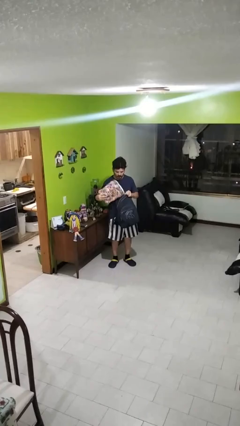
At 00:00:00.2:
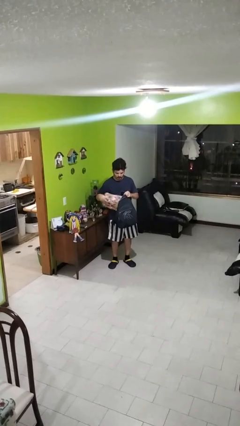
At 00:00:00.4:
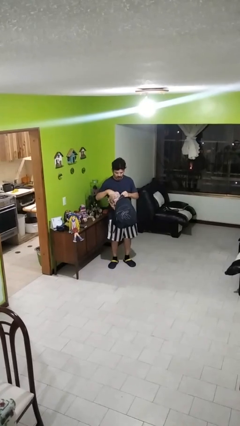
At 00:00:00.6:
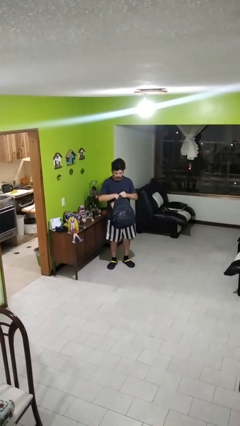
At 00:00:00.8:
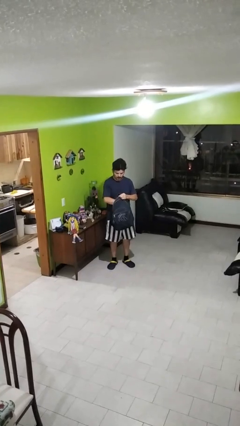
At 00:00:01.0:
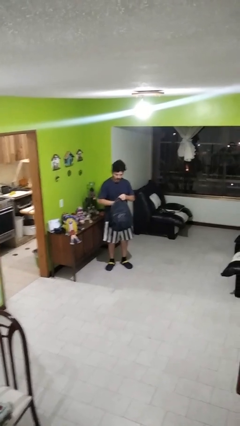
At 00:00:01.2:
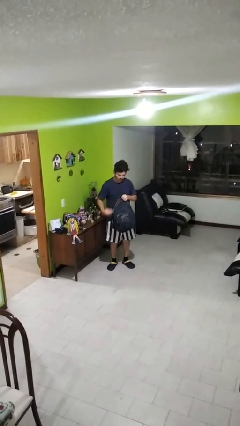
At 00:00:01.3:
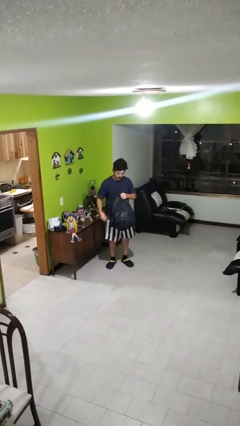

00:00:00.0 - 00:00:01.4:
person puts object into backpack

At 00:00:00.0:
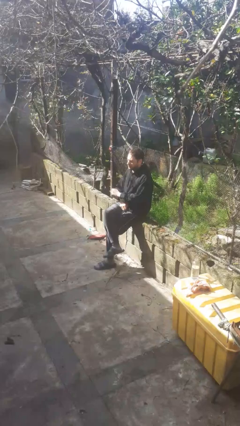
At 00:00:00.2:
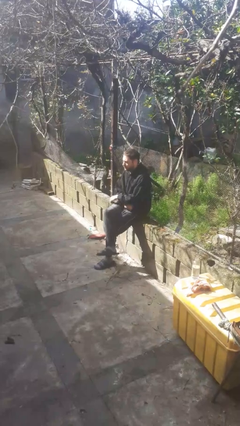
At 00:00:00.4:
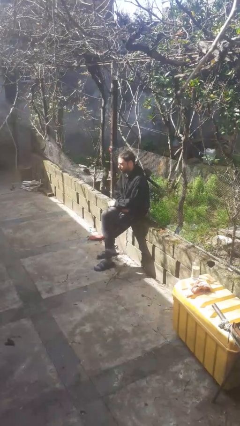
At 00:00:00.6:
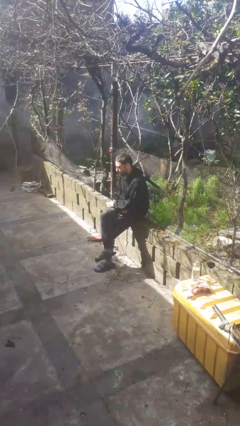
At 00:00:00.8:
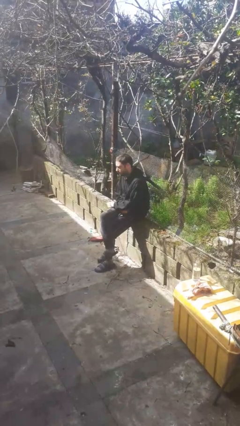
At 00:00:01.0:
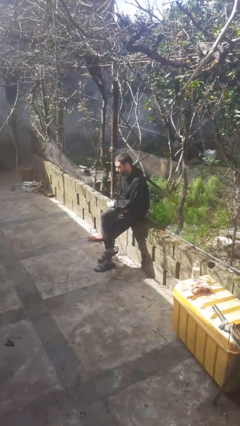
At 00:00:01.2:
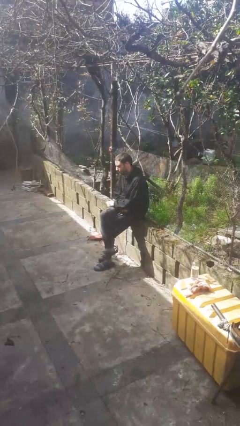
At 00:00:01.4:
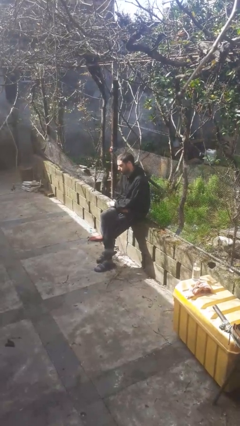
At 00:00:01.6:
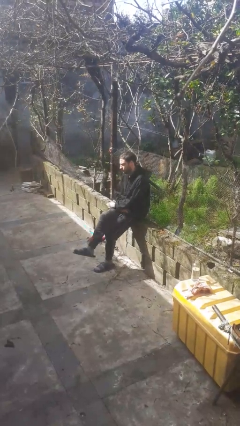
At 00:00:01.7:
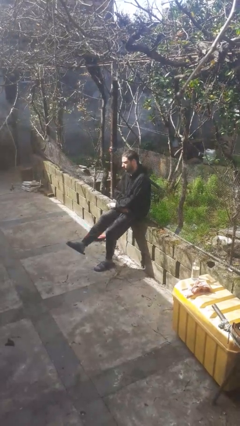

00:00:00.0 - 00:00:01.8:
person crosses legs

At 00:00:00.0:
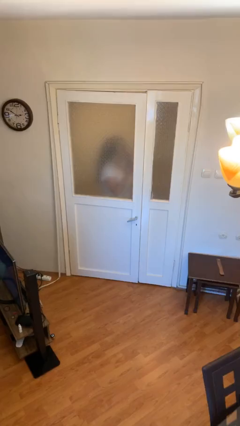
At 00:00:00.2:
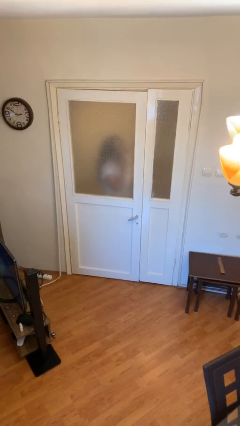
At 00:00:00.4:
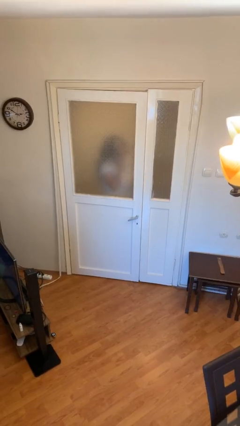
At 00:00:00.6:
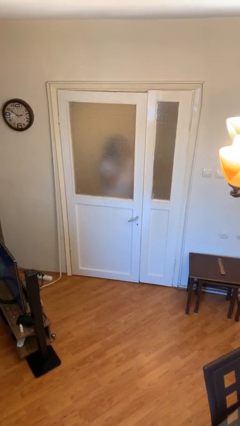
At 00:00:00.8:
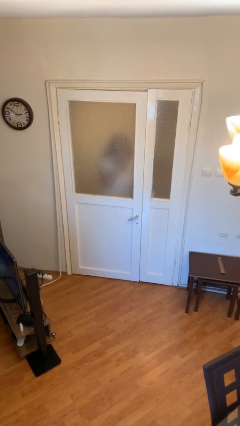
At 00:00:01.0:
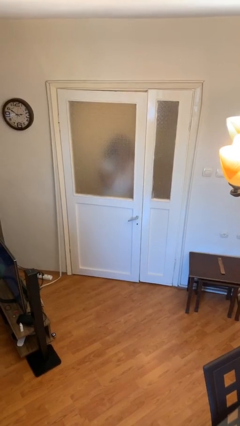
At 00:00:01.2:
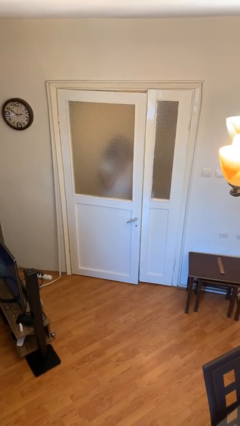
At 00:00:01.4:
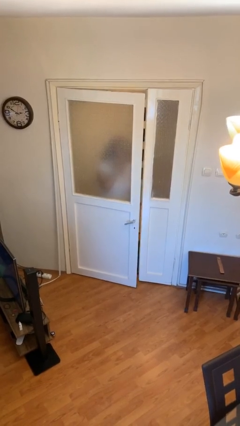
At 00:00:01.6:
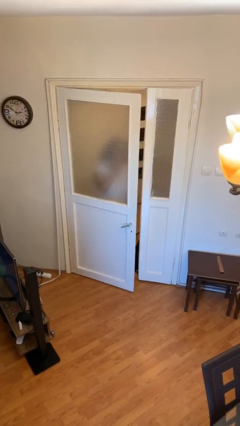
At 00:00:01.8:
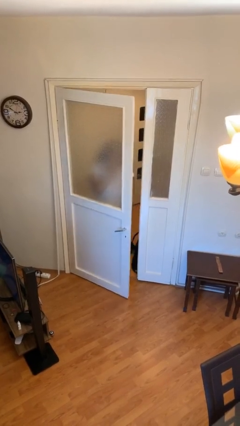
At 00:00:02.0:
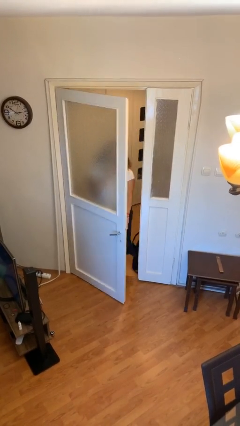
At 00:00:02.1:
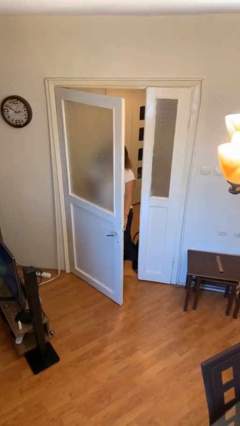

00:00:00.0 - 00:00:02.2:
person opens facility door

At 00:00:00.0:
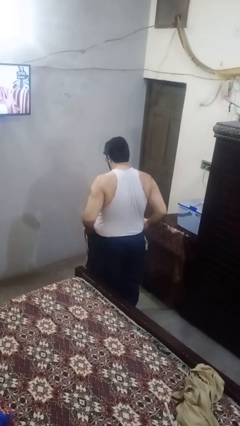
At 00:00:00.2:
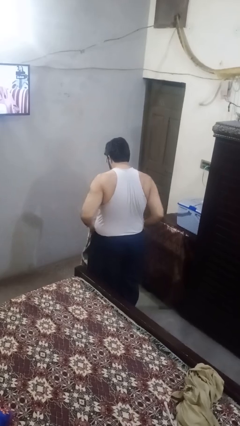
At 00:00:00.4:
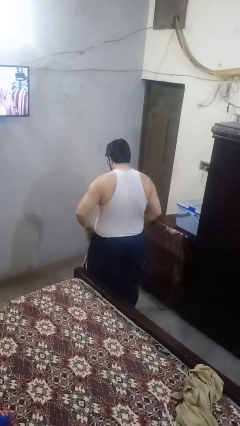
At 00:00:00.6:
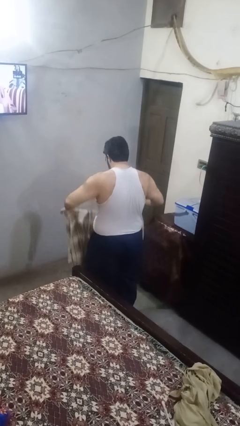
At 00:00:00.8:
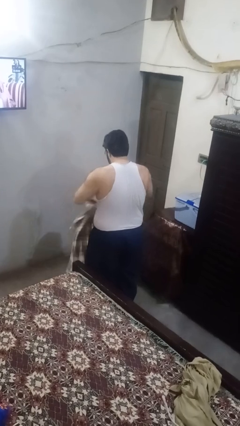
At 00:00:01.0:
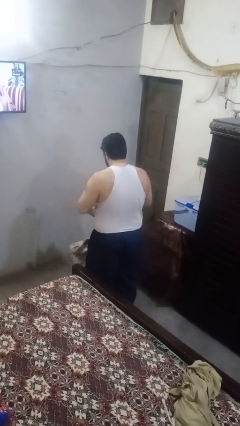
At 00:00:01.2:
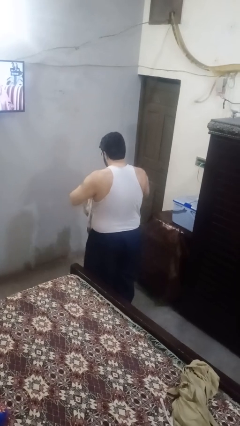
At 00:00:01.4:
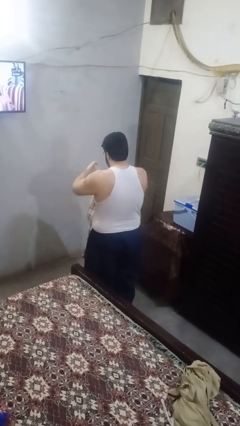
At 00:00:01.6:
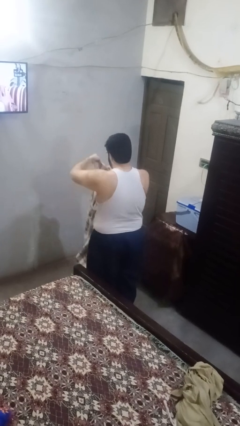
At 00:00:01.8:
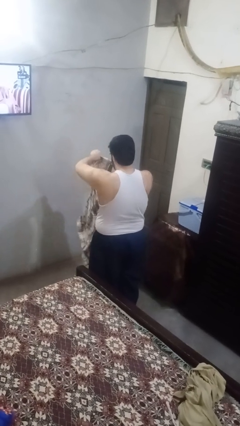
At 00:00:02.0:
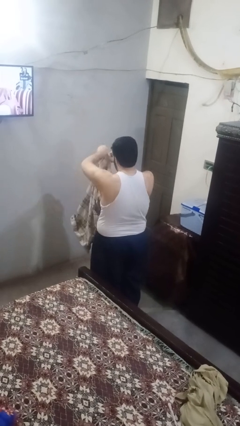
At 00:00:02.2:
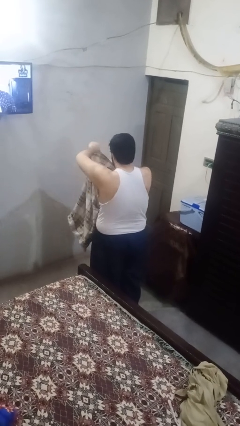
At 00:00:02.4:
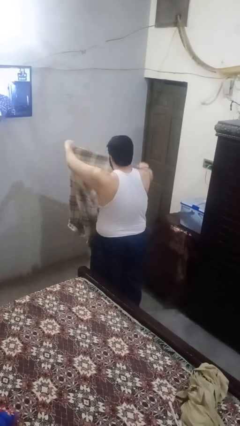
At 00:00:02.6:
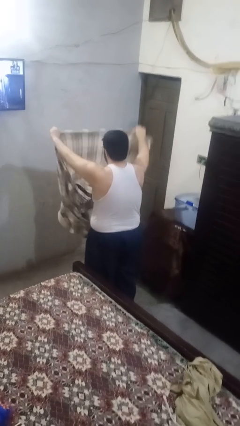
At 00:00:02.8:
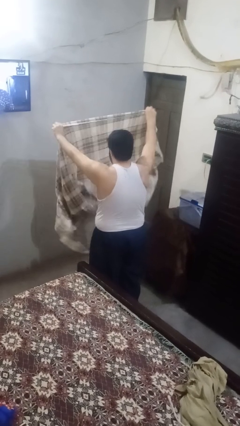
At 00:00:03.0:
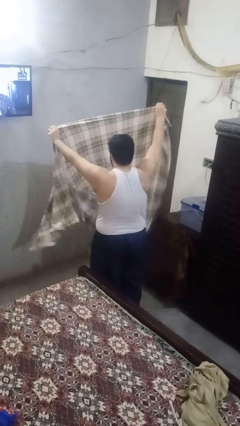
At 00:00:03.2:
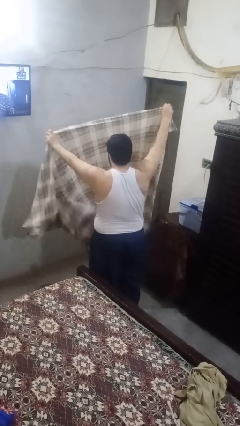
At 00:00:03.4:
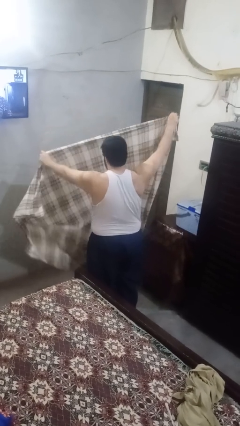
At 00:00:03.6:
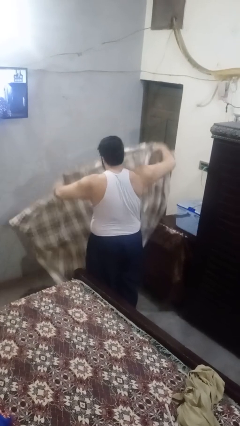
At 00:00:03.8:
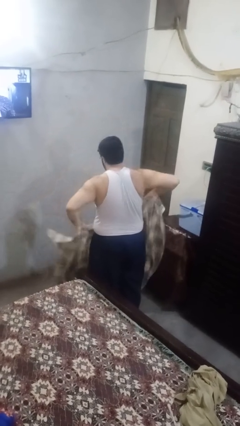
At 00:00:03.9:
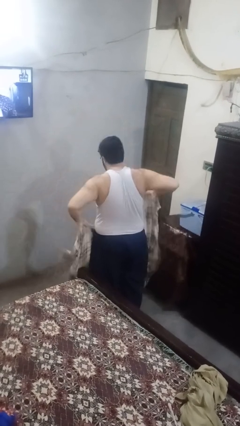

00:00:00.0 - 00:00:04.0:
person unfolds blanket

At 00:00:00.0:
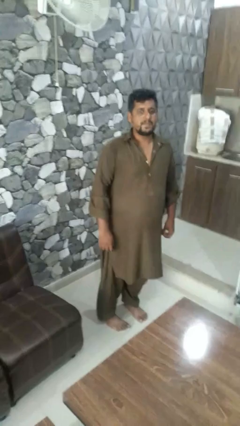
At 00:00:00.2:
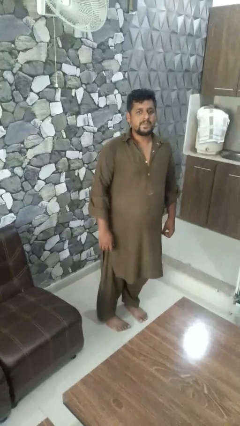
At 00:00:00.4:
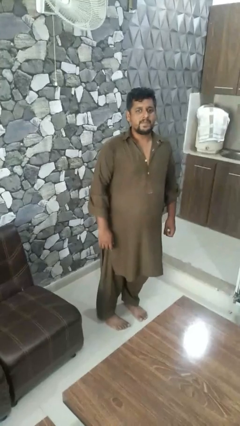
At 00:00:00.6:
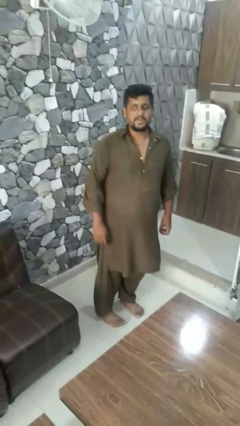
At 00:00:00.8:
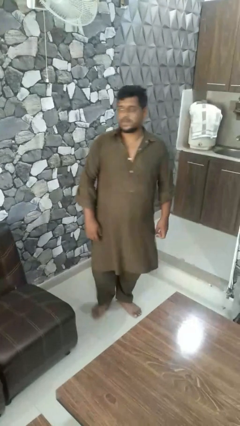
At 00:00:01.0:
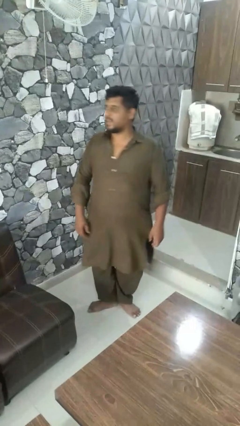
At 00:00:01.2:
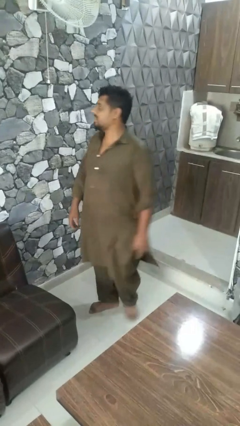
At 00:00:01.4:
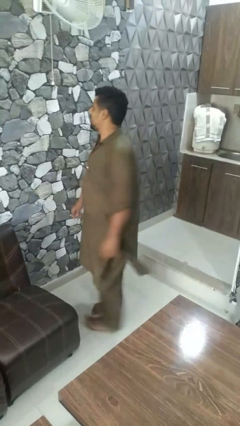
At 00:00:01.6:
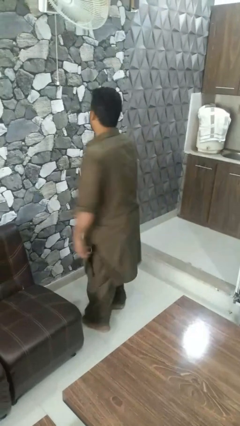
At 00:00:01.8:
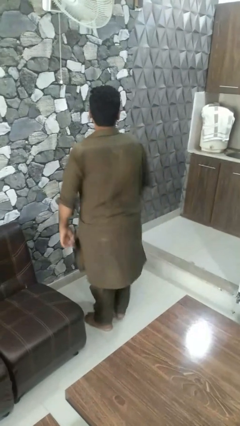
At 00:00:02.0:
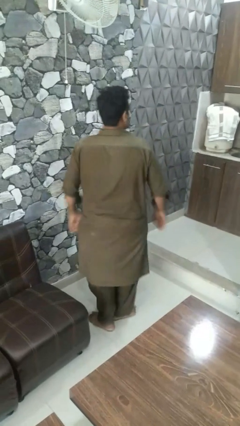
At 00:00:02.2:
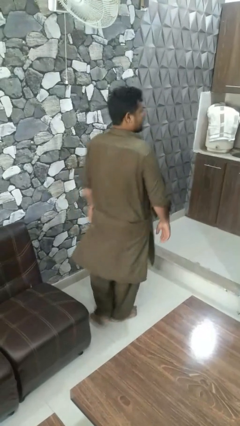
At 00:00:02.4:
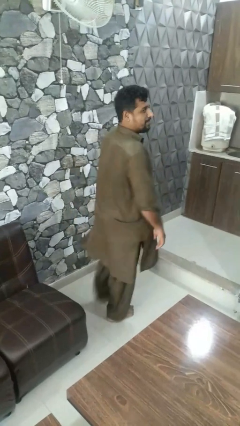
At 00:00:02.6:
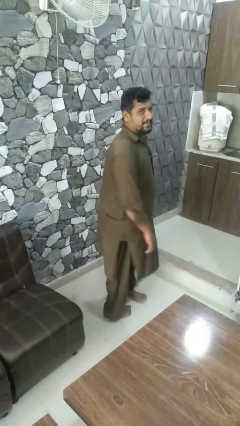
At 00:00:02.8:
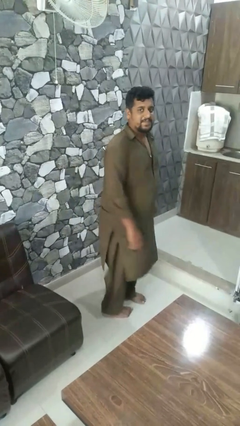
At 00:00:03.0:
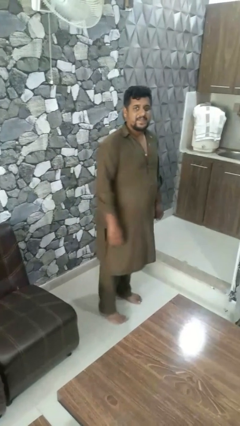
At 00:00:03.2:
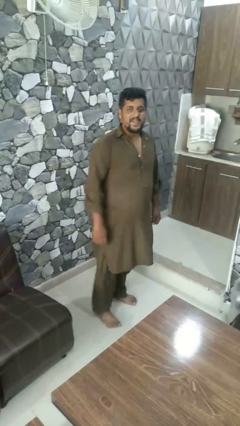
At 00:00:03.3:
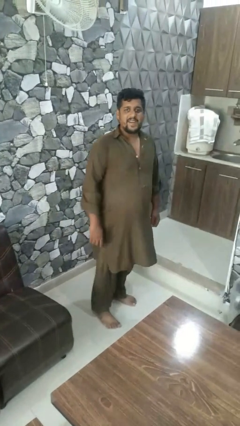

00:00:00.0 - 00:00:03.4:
person twirls

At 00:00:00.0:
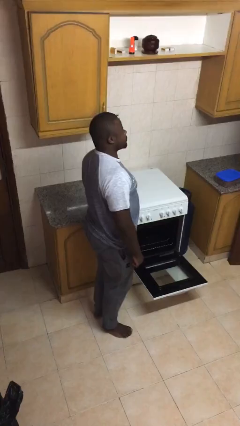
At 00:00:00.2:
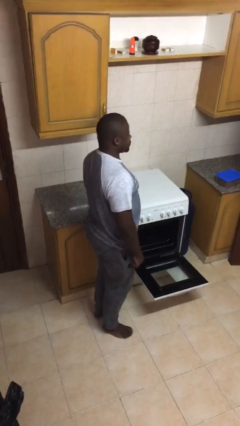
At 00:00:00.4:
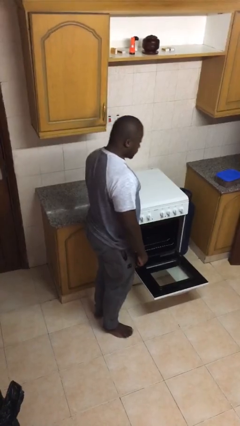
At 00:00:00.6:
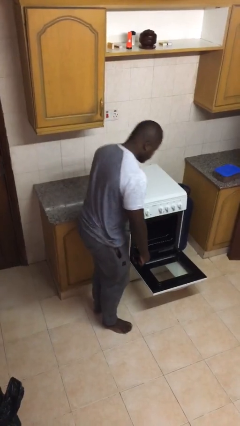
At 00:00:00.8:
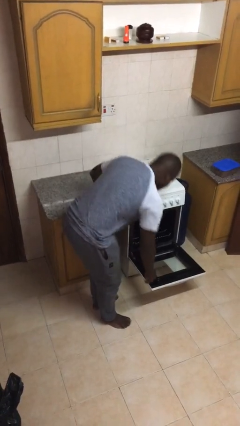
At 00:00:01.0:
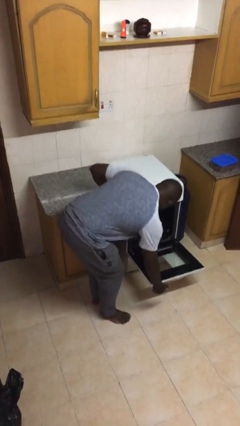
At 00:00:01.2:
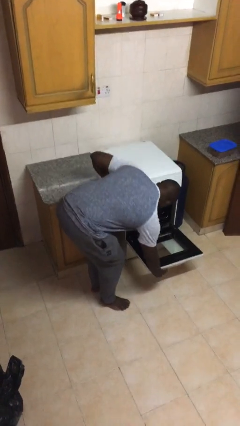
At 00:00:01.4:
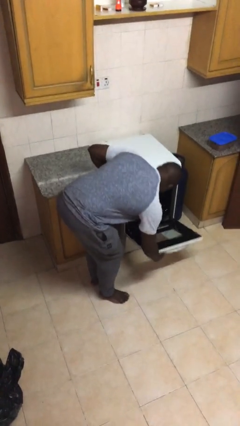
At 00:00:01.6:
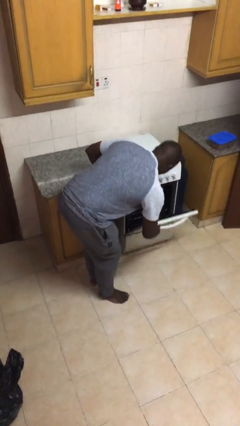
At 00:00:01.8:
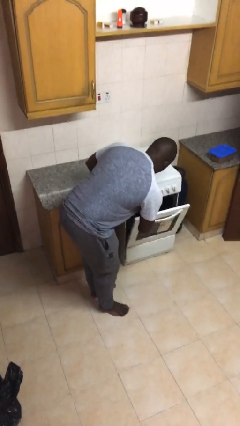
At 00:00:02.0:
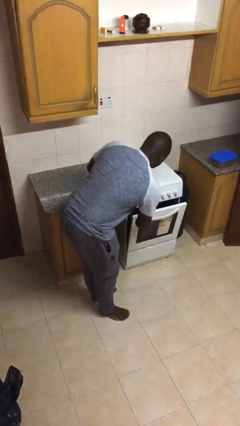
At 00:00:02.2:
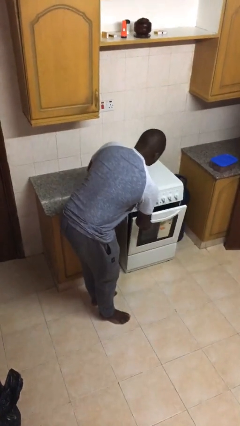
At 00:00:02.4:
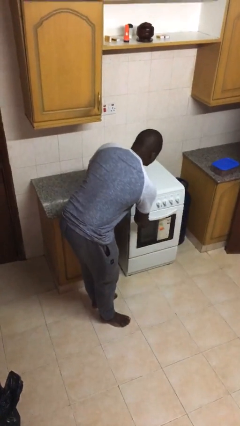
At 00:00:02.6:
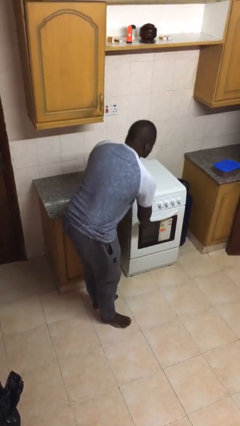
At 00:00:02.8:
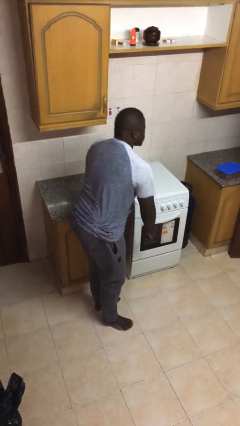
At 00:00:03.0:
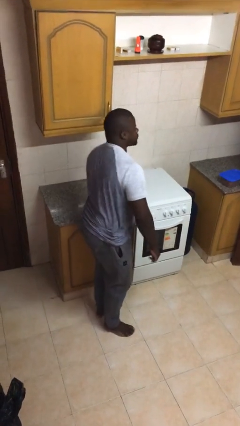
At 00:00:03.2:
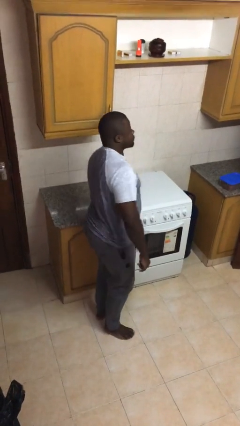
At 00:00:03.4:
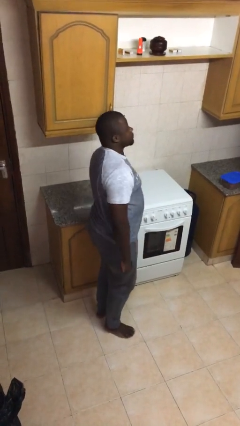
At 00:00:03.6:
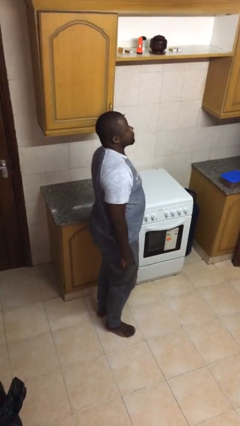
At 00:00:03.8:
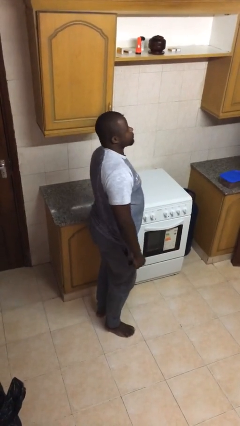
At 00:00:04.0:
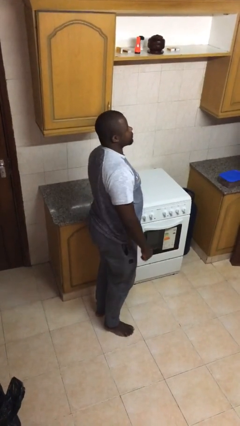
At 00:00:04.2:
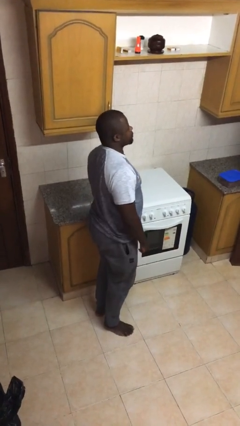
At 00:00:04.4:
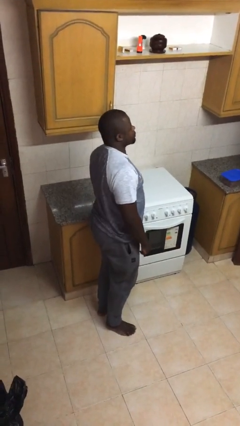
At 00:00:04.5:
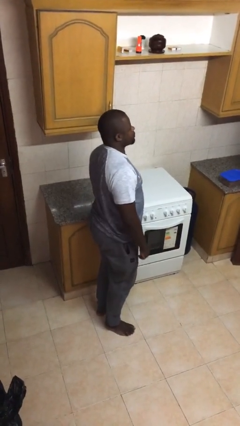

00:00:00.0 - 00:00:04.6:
person closes oven door
